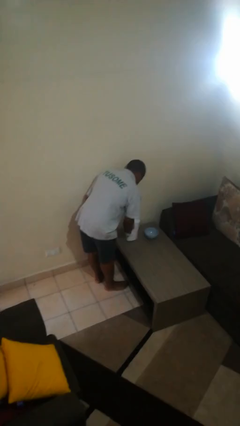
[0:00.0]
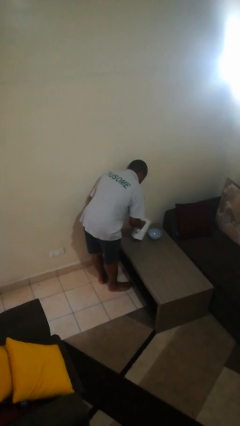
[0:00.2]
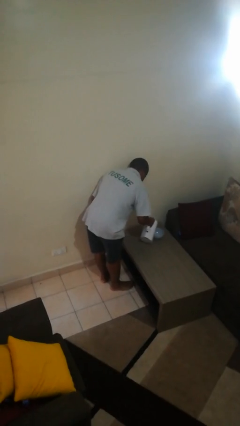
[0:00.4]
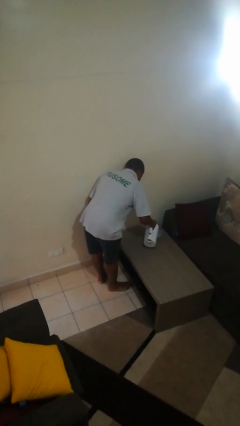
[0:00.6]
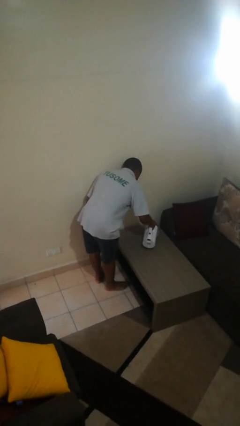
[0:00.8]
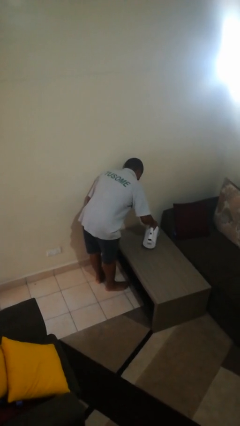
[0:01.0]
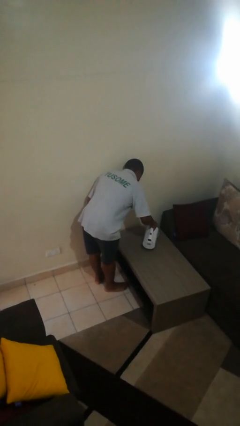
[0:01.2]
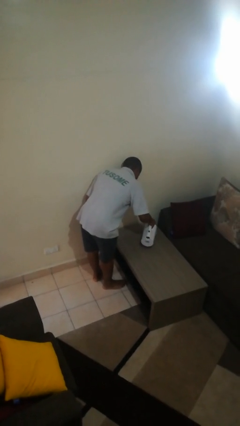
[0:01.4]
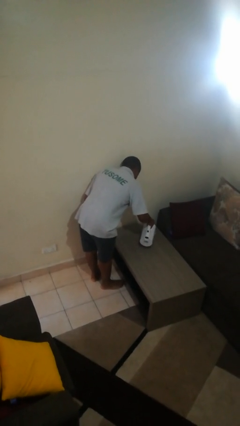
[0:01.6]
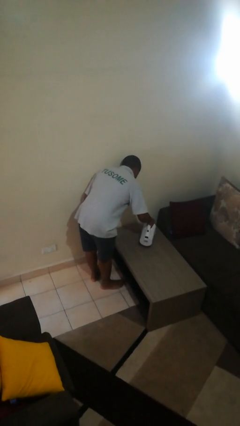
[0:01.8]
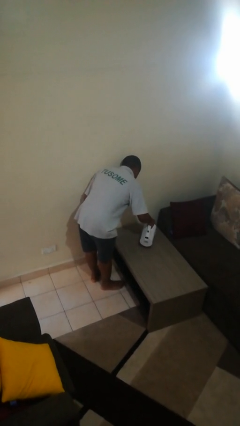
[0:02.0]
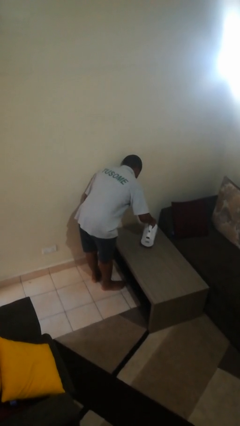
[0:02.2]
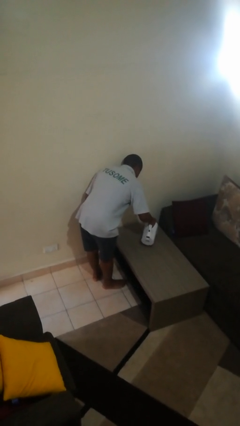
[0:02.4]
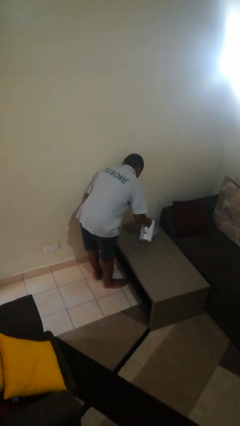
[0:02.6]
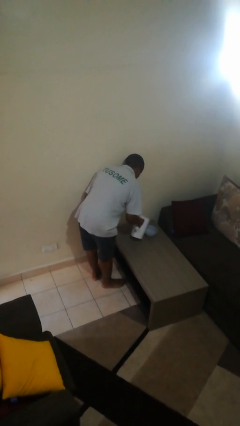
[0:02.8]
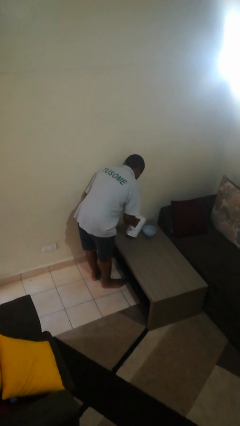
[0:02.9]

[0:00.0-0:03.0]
person pours into bowl

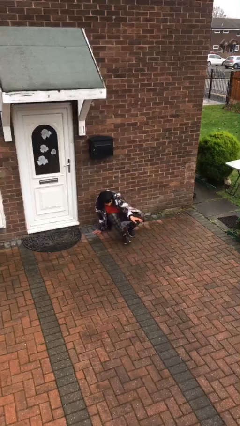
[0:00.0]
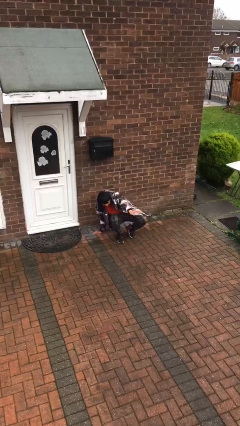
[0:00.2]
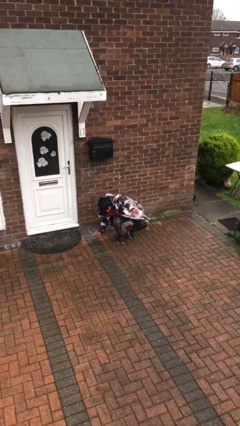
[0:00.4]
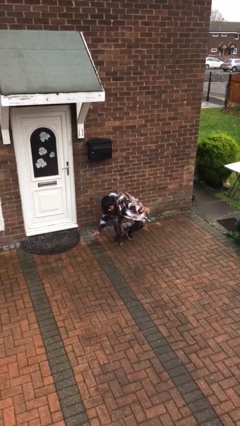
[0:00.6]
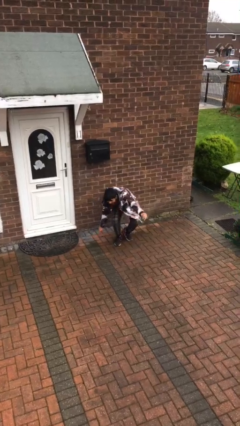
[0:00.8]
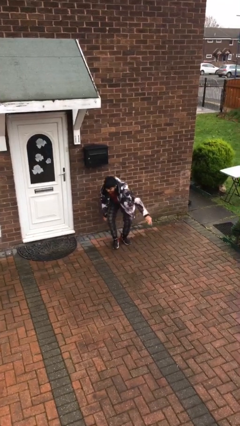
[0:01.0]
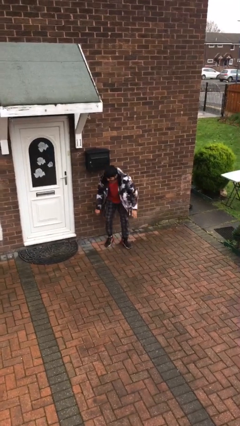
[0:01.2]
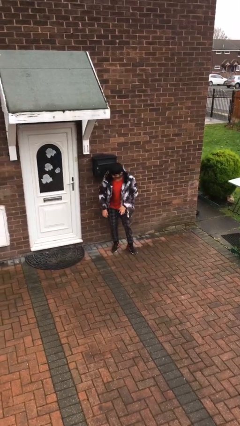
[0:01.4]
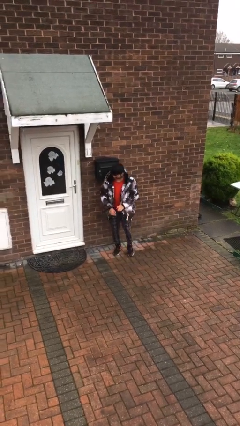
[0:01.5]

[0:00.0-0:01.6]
person stands up

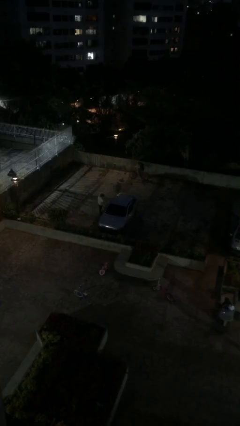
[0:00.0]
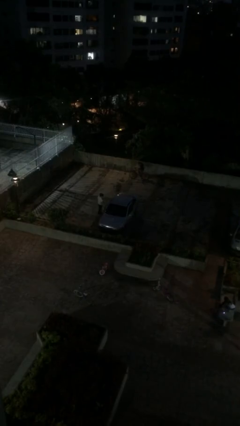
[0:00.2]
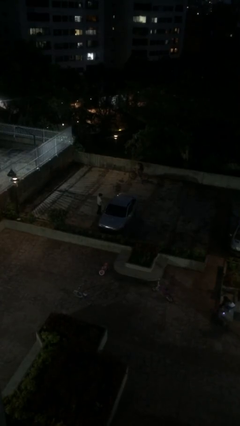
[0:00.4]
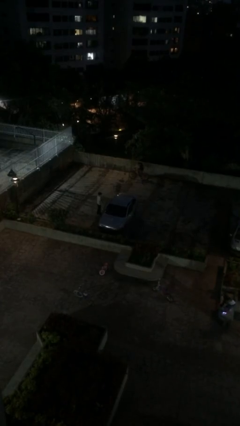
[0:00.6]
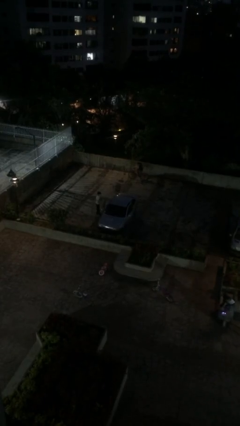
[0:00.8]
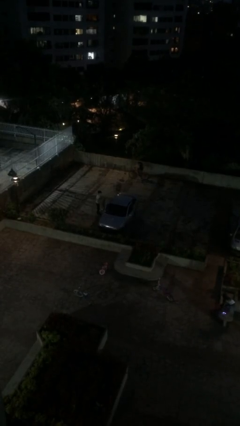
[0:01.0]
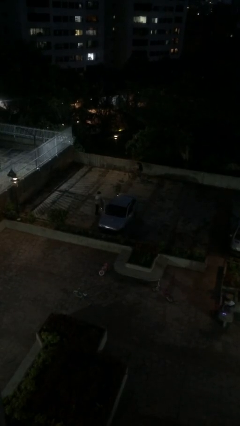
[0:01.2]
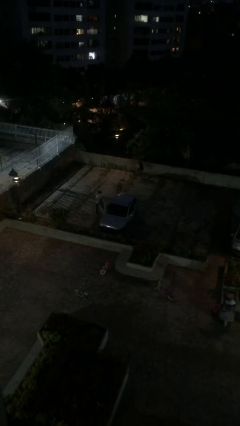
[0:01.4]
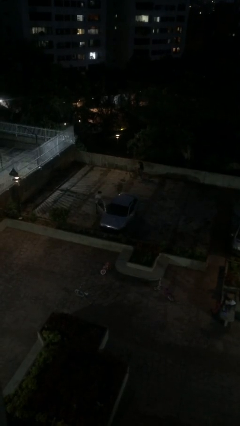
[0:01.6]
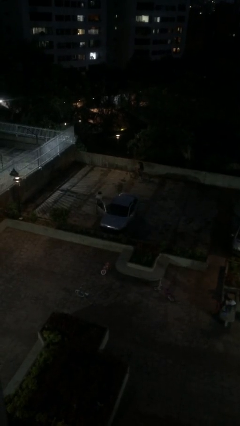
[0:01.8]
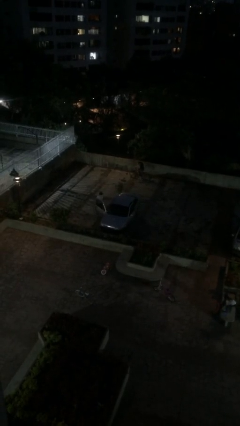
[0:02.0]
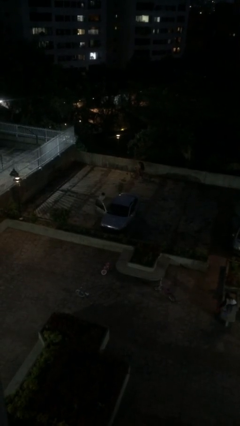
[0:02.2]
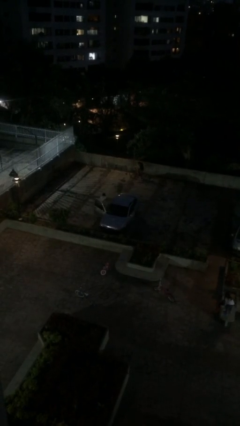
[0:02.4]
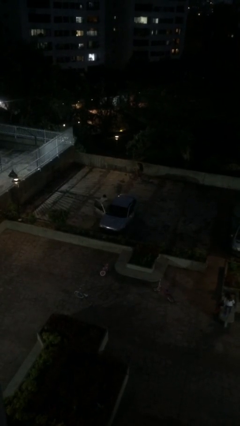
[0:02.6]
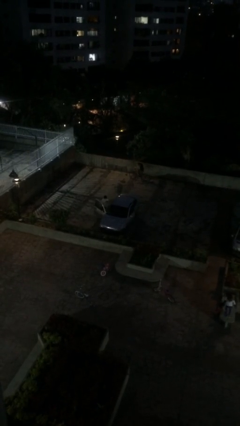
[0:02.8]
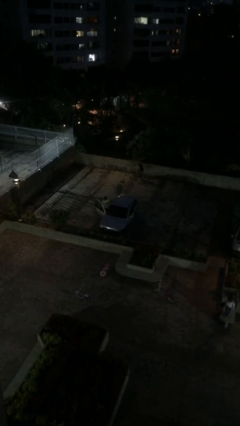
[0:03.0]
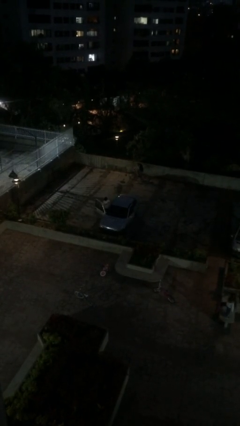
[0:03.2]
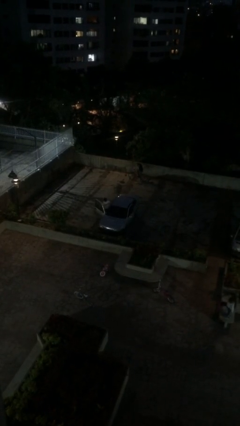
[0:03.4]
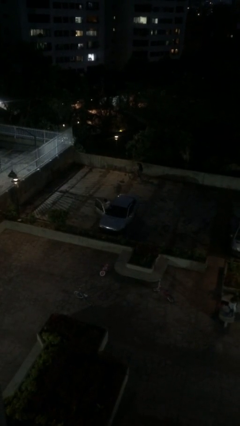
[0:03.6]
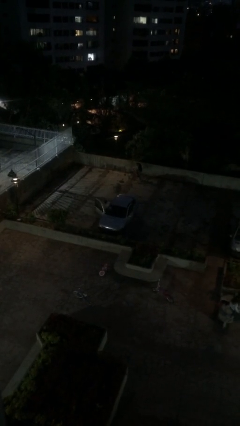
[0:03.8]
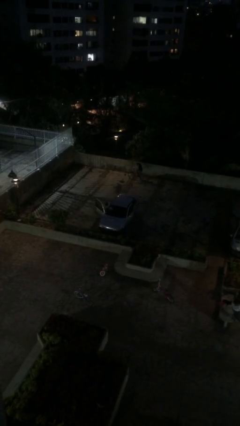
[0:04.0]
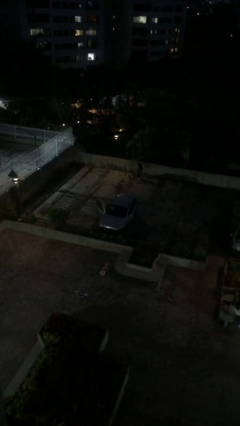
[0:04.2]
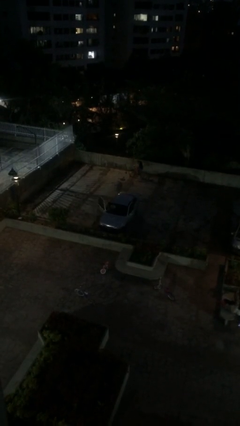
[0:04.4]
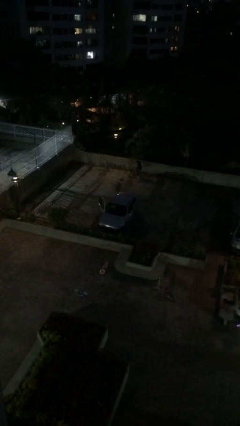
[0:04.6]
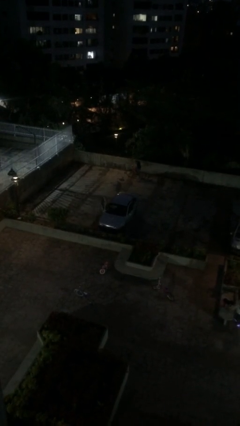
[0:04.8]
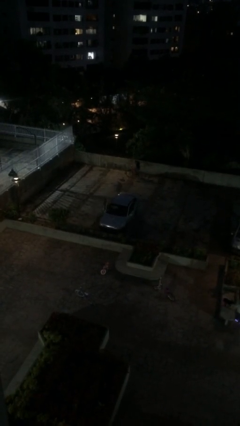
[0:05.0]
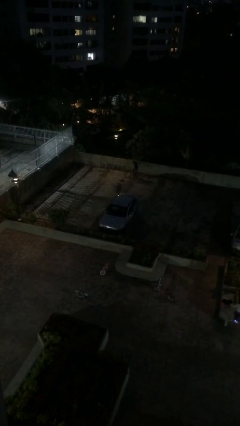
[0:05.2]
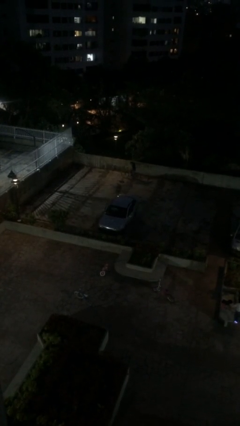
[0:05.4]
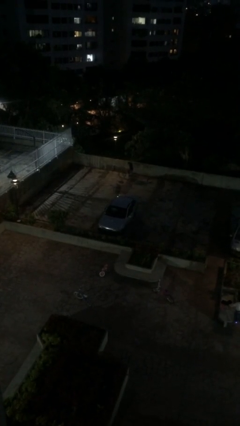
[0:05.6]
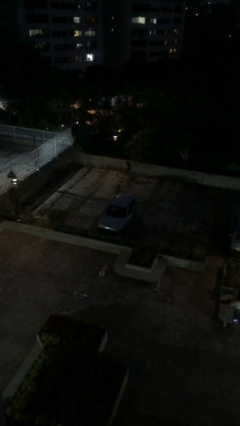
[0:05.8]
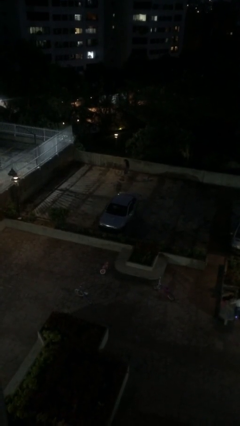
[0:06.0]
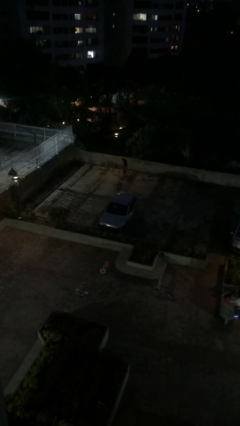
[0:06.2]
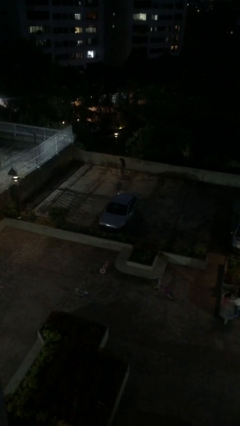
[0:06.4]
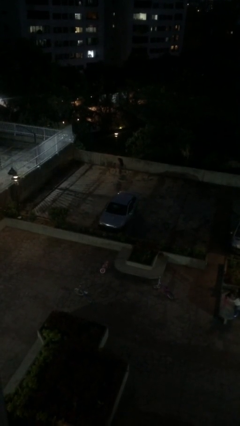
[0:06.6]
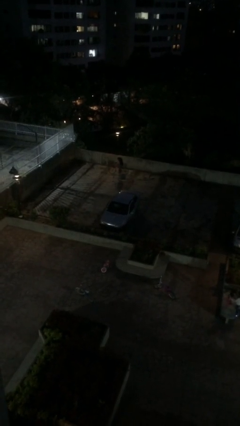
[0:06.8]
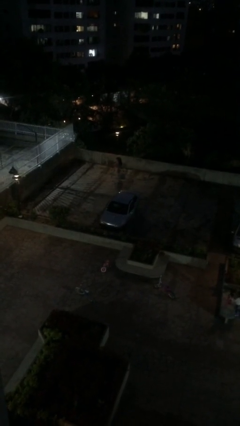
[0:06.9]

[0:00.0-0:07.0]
car picks up person

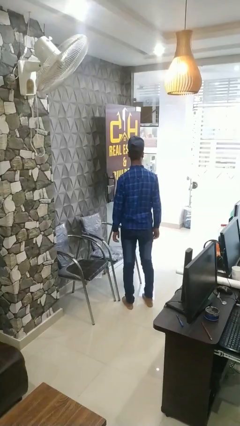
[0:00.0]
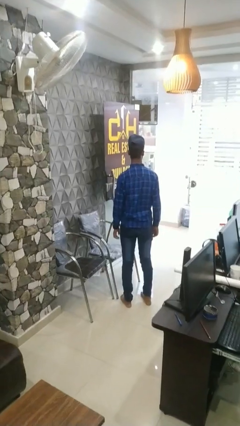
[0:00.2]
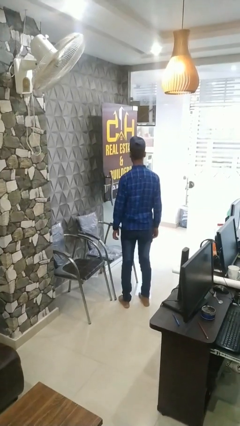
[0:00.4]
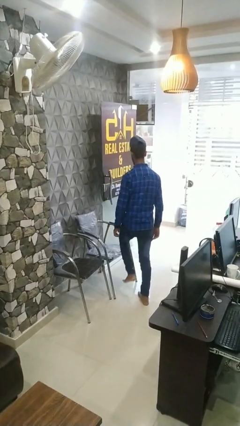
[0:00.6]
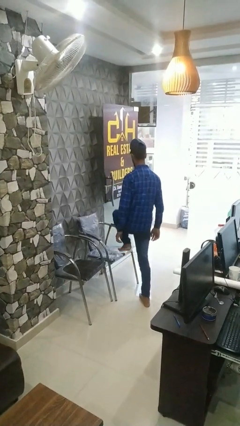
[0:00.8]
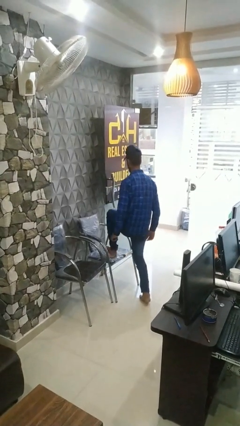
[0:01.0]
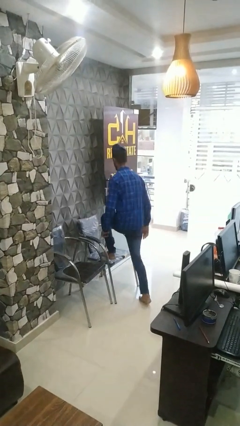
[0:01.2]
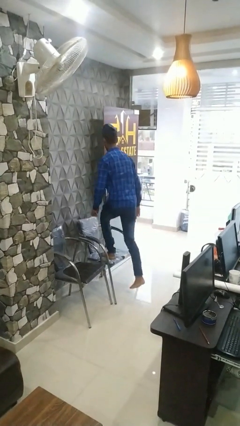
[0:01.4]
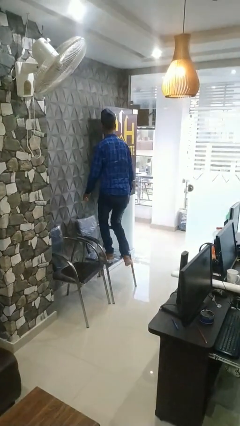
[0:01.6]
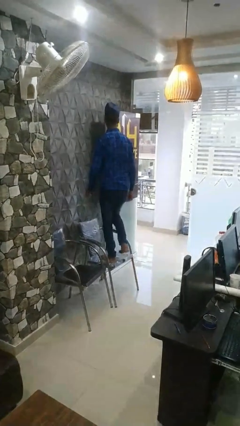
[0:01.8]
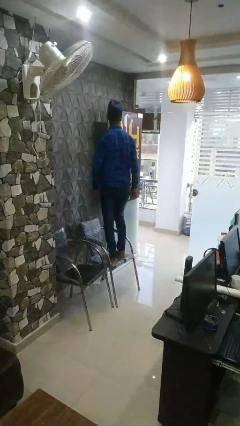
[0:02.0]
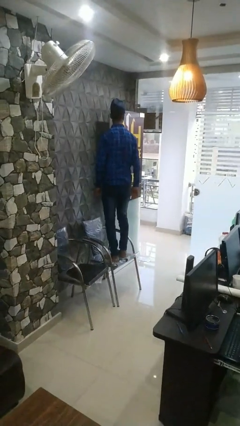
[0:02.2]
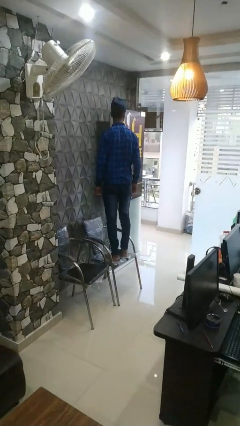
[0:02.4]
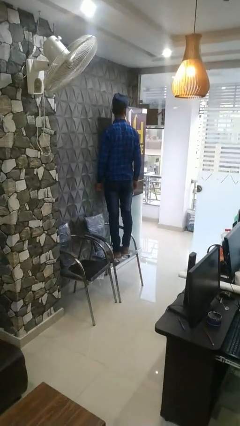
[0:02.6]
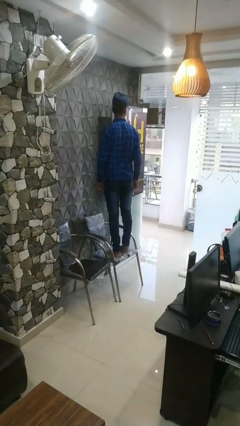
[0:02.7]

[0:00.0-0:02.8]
person climbs on chair

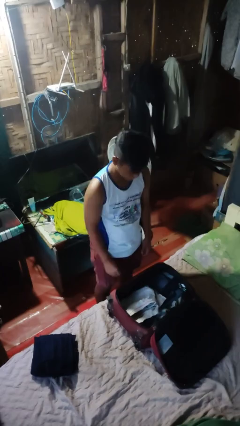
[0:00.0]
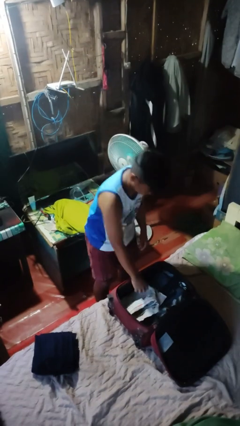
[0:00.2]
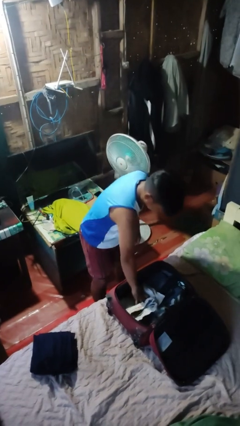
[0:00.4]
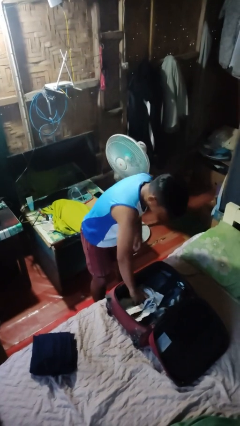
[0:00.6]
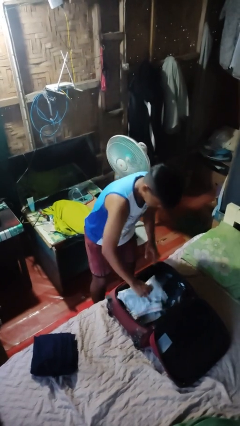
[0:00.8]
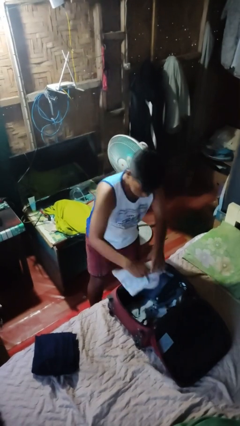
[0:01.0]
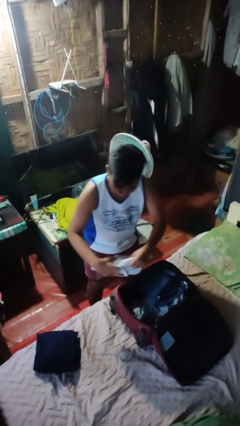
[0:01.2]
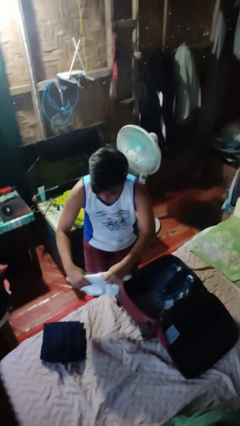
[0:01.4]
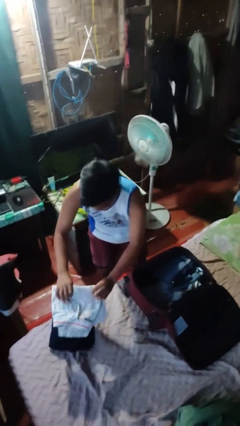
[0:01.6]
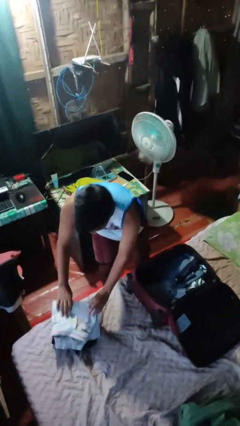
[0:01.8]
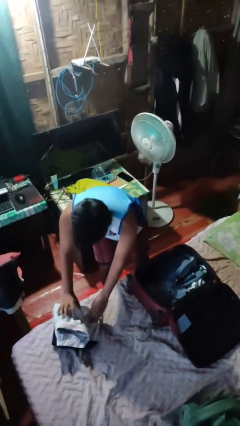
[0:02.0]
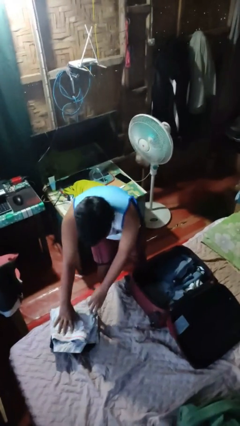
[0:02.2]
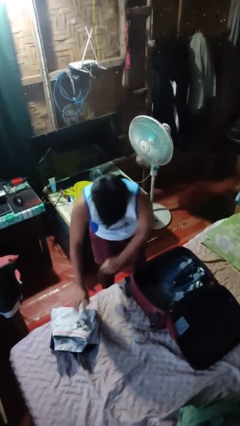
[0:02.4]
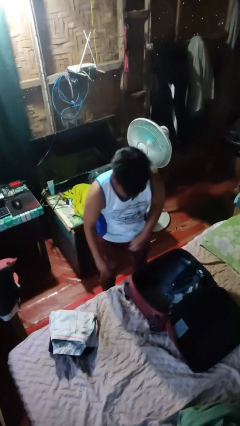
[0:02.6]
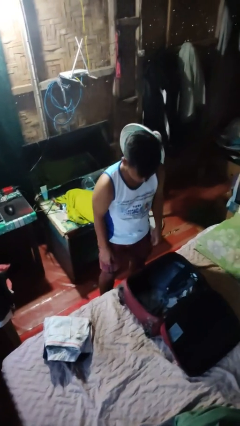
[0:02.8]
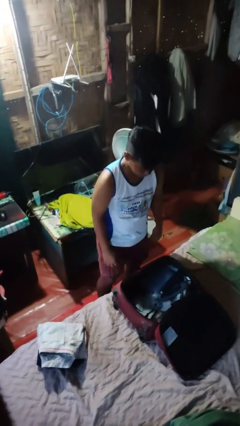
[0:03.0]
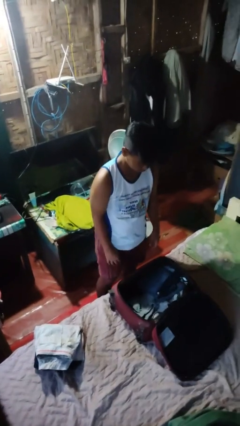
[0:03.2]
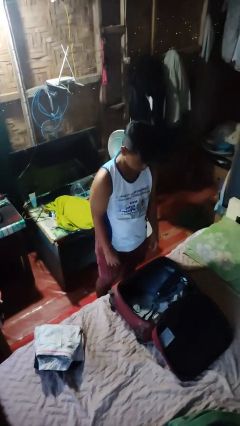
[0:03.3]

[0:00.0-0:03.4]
person unloads clothes from suitcase
